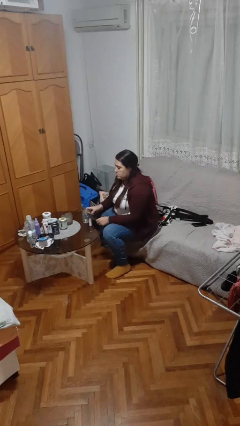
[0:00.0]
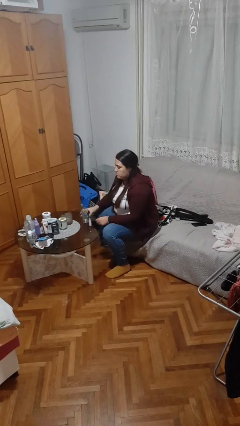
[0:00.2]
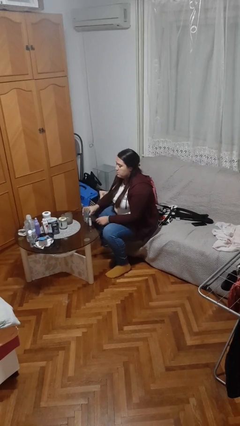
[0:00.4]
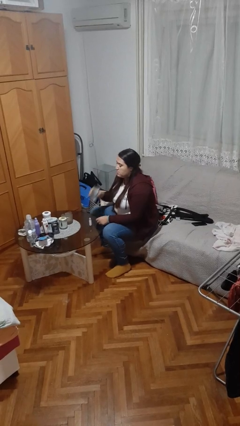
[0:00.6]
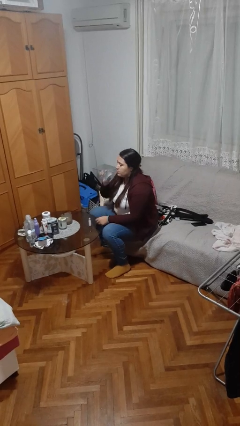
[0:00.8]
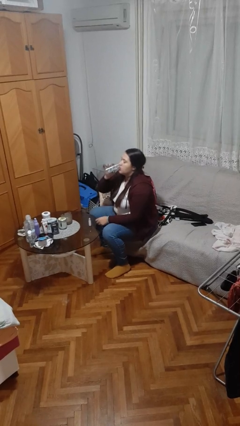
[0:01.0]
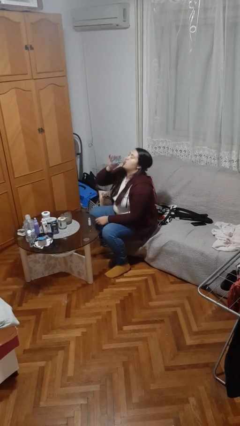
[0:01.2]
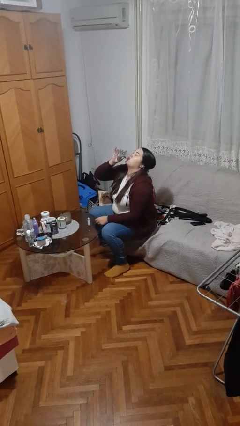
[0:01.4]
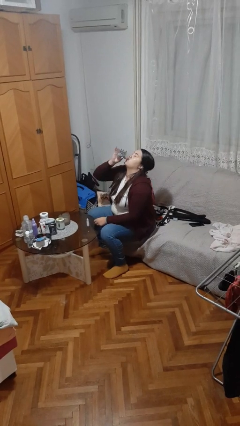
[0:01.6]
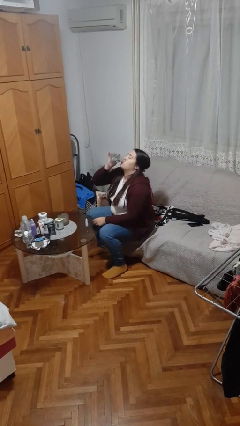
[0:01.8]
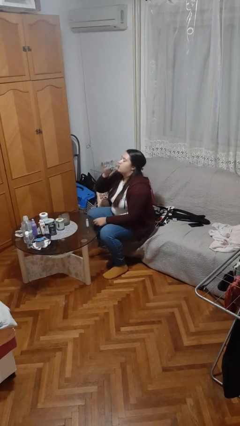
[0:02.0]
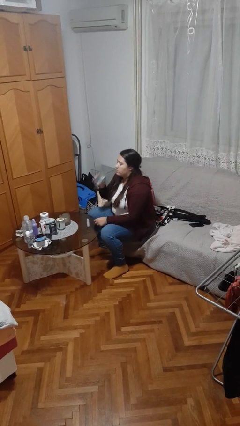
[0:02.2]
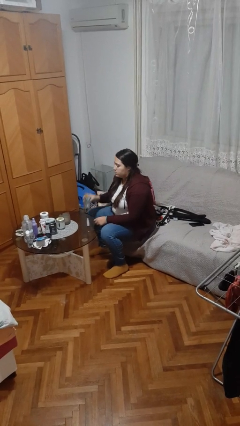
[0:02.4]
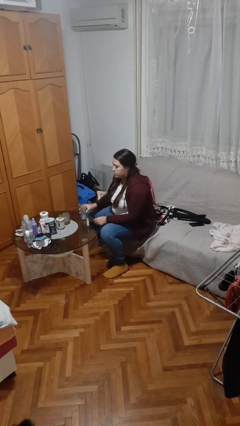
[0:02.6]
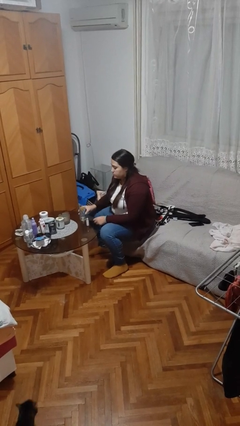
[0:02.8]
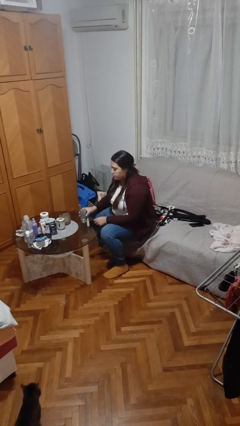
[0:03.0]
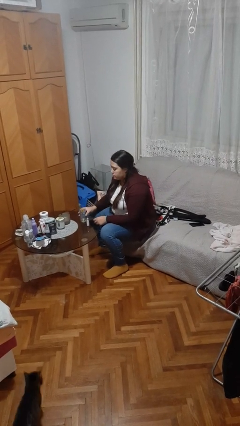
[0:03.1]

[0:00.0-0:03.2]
person drinks from cup

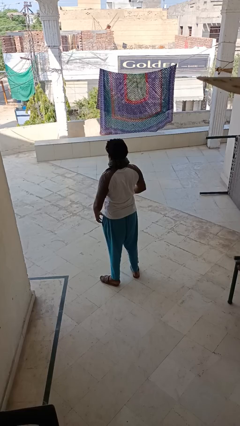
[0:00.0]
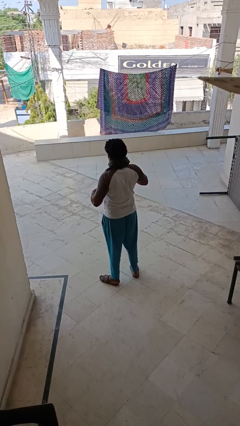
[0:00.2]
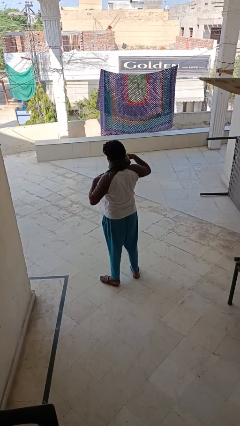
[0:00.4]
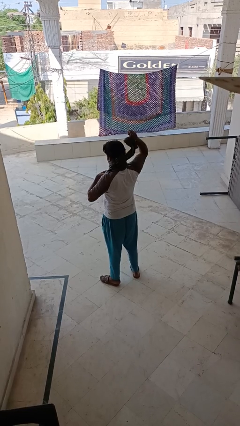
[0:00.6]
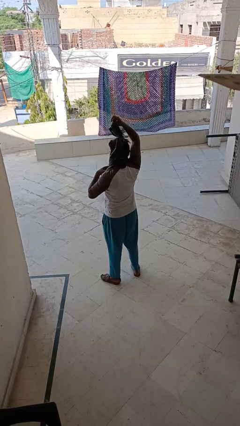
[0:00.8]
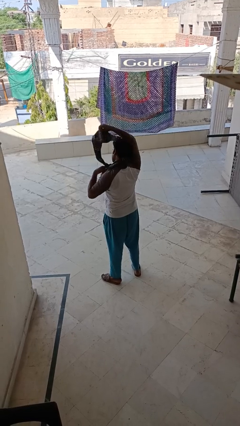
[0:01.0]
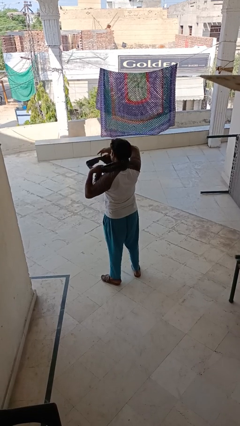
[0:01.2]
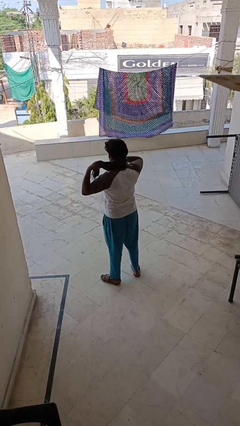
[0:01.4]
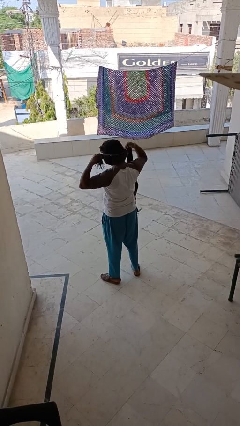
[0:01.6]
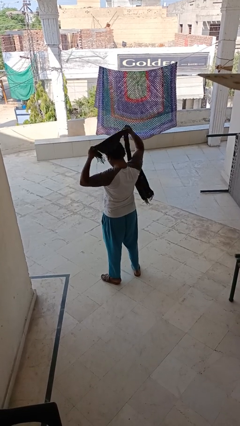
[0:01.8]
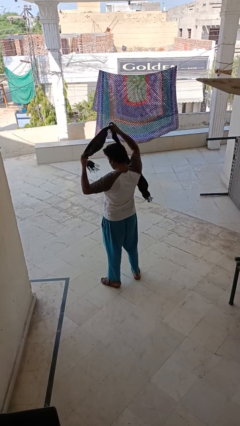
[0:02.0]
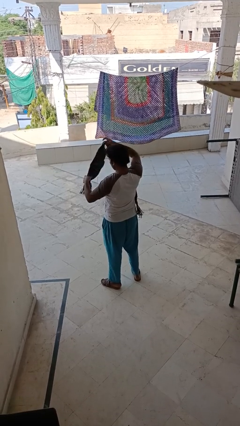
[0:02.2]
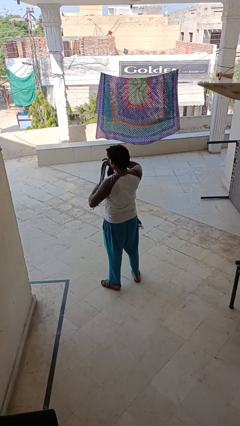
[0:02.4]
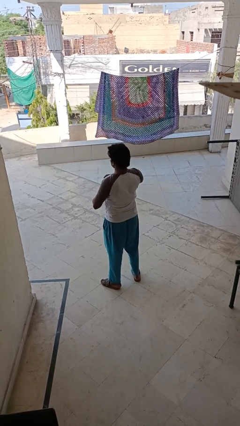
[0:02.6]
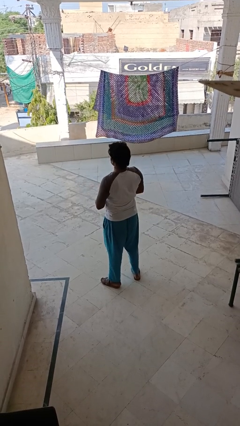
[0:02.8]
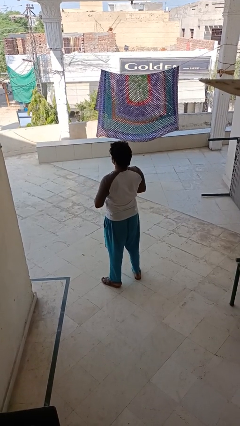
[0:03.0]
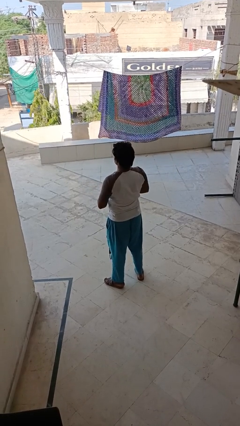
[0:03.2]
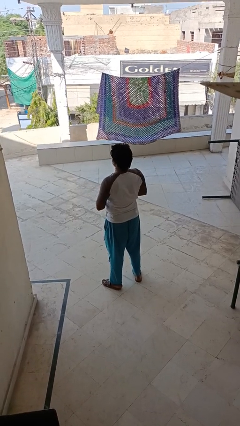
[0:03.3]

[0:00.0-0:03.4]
person takes off scarf

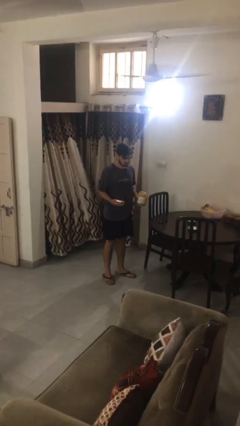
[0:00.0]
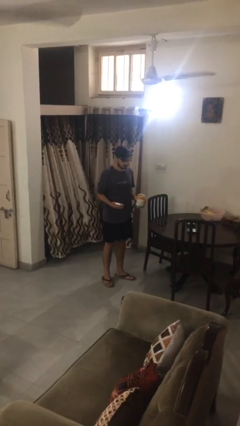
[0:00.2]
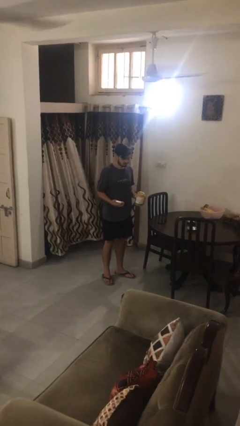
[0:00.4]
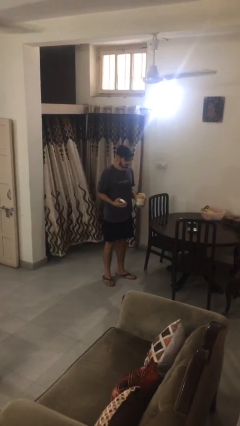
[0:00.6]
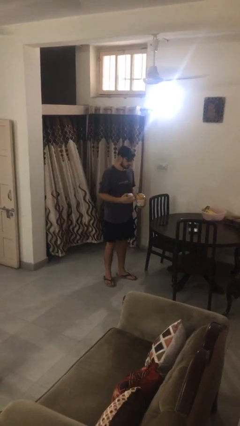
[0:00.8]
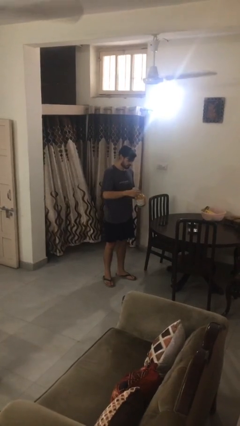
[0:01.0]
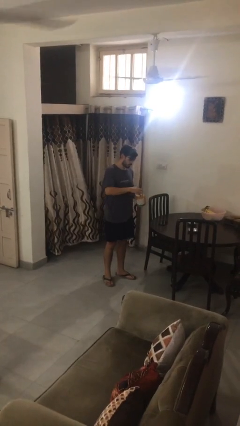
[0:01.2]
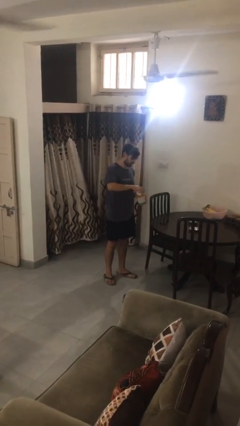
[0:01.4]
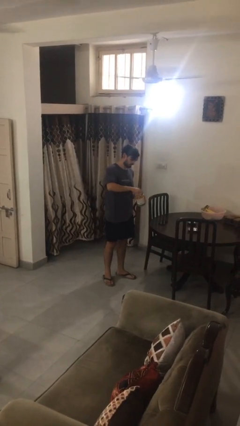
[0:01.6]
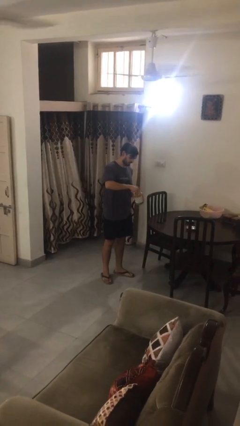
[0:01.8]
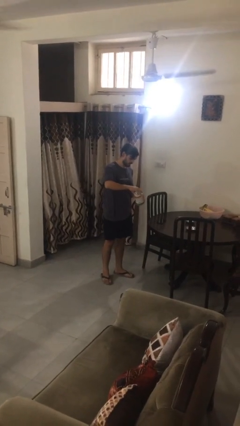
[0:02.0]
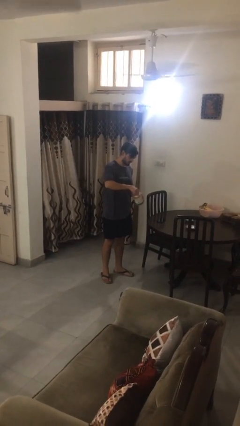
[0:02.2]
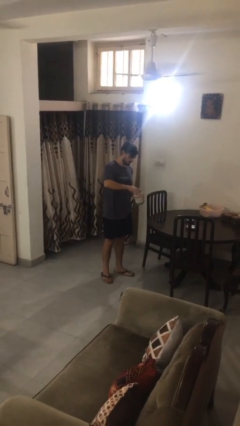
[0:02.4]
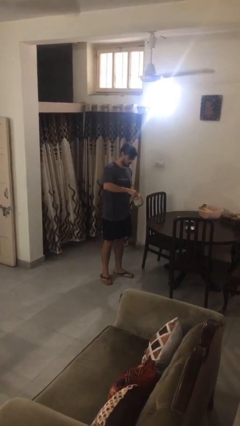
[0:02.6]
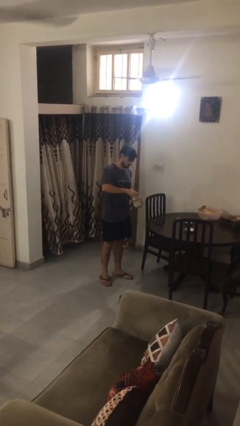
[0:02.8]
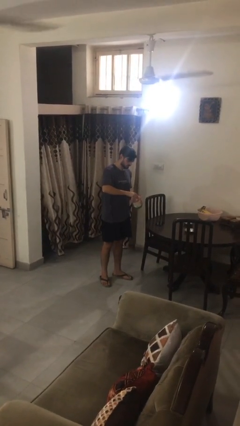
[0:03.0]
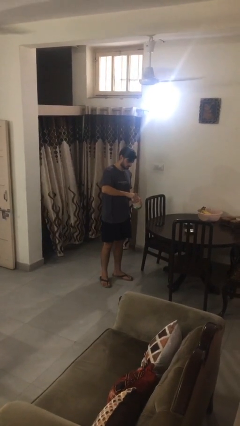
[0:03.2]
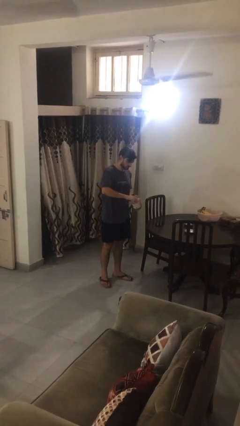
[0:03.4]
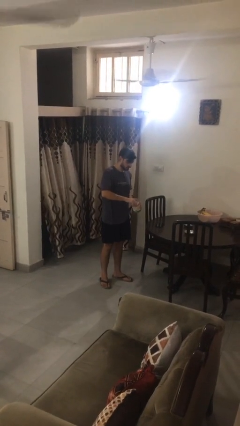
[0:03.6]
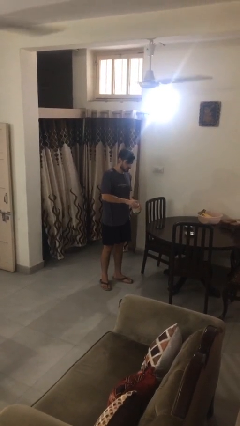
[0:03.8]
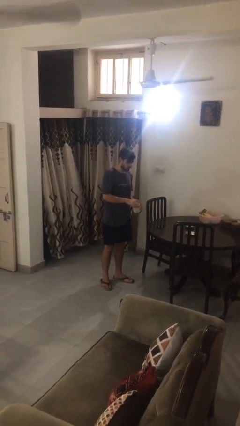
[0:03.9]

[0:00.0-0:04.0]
person closes jar

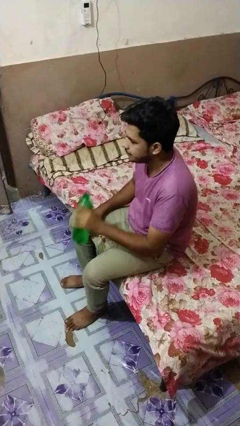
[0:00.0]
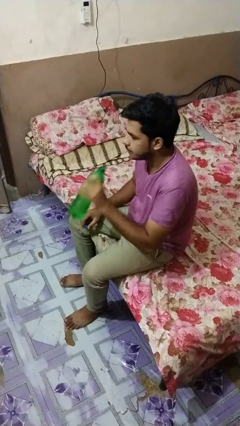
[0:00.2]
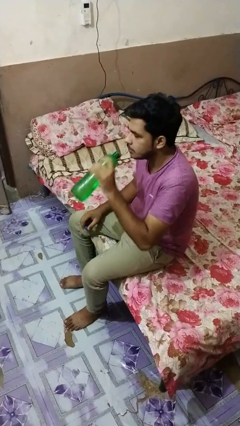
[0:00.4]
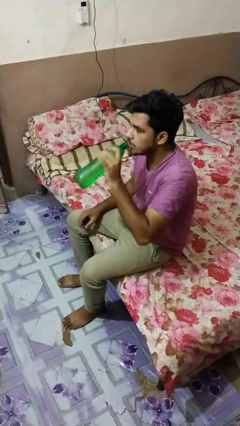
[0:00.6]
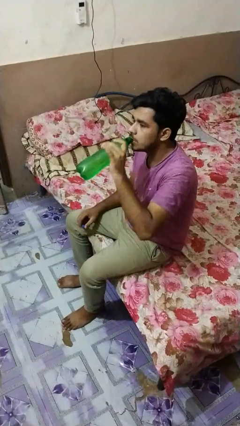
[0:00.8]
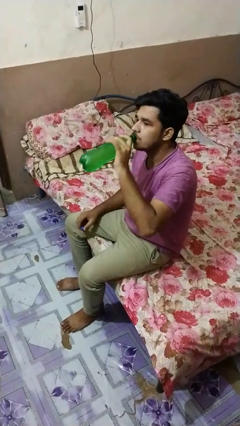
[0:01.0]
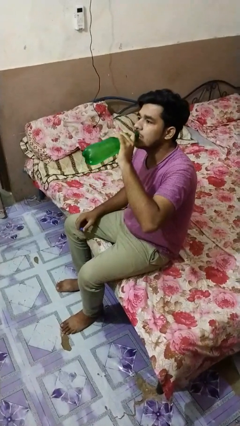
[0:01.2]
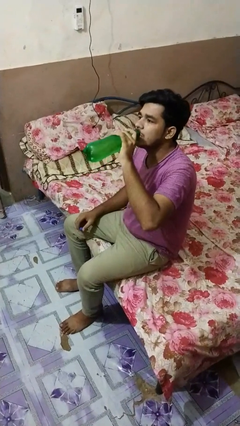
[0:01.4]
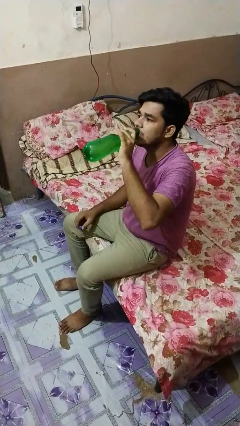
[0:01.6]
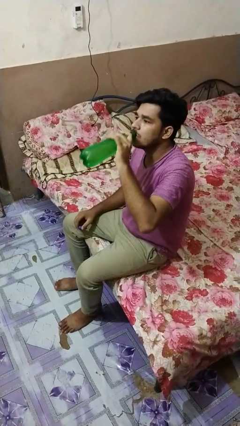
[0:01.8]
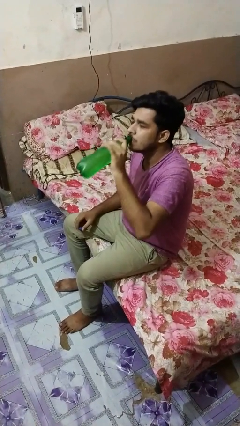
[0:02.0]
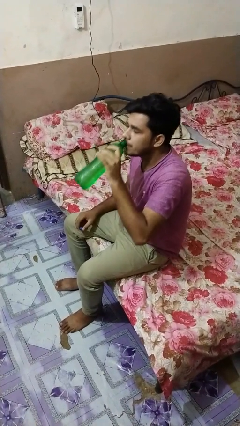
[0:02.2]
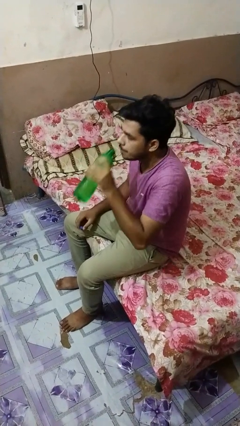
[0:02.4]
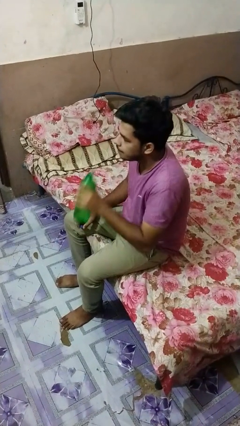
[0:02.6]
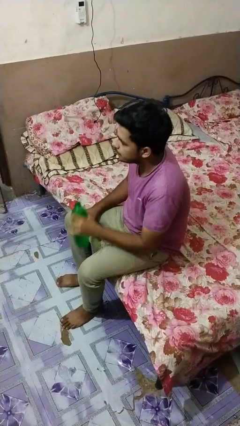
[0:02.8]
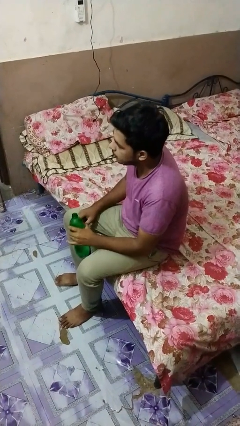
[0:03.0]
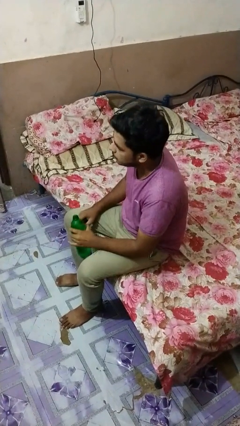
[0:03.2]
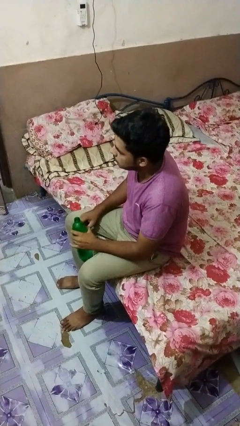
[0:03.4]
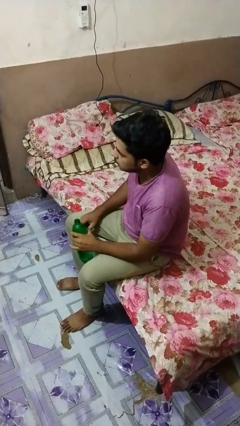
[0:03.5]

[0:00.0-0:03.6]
person drinks from bottle

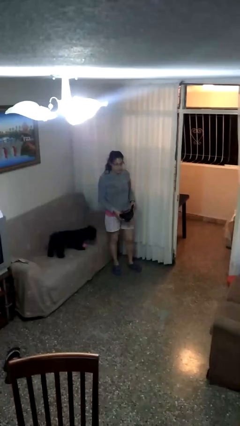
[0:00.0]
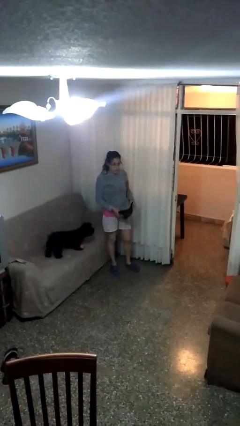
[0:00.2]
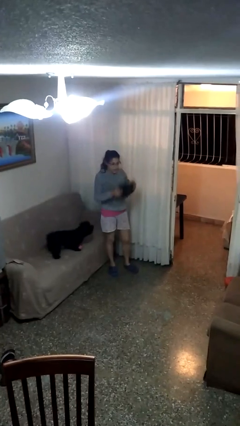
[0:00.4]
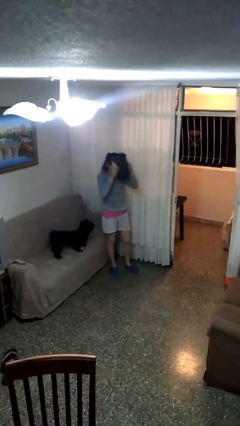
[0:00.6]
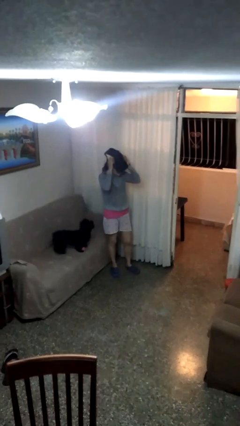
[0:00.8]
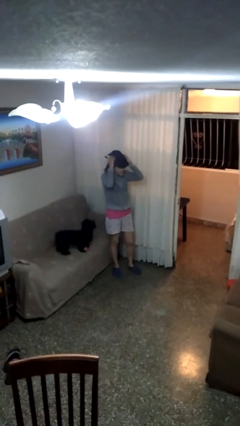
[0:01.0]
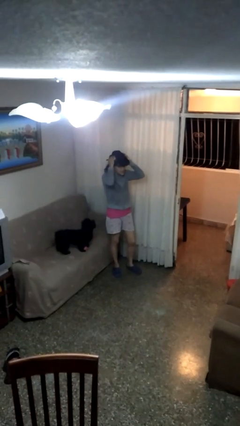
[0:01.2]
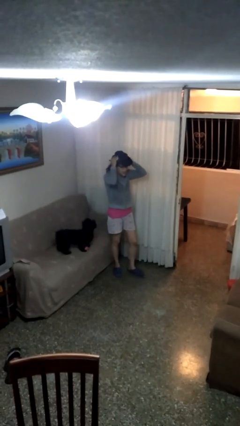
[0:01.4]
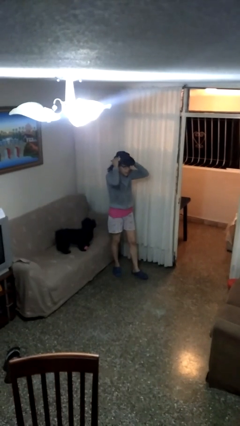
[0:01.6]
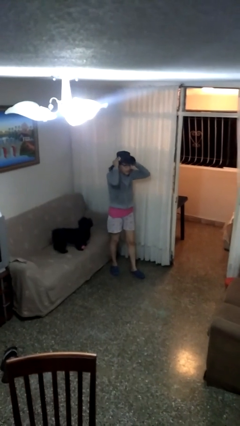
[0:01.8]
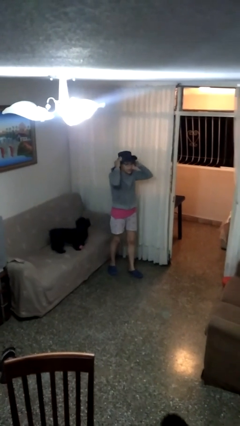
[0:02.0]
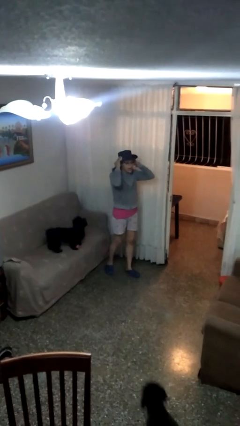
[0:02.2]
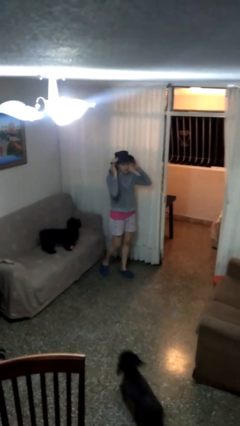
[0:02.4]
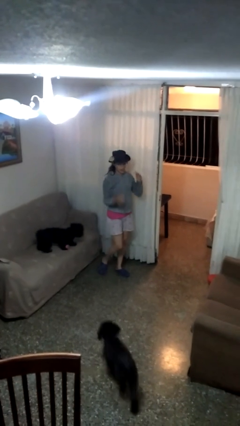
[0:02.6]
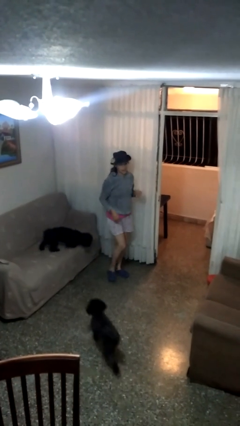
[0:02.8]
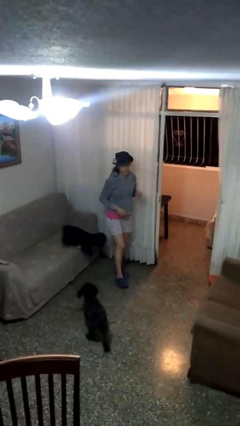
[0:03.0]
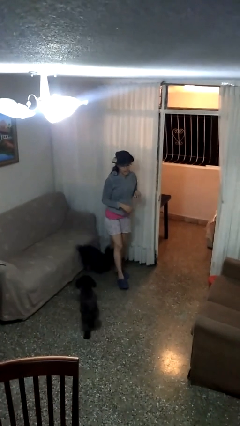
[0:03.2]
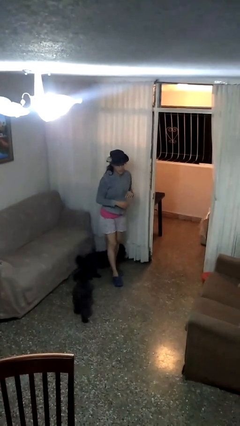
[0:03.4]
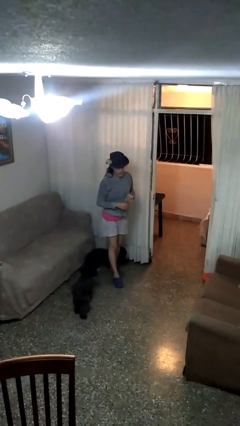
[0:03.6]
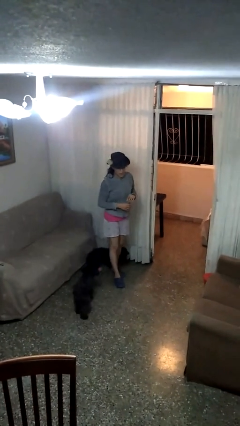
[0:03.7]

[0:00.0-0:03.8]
person puts on hat
